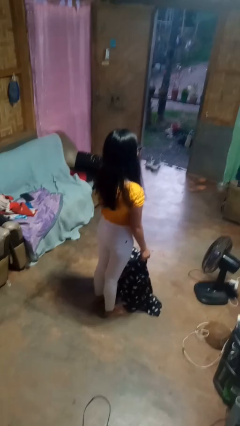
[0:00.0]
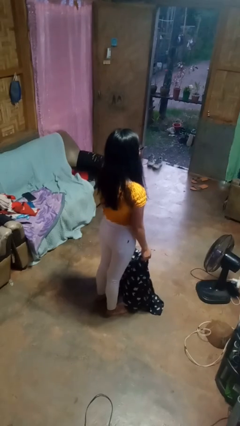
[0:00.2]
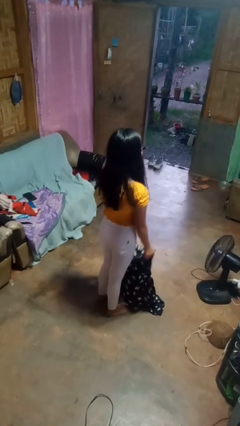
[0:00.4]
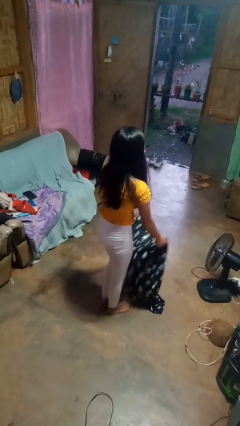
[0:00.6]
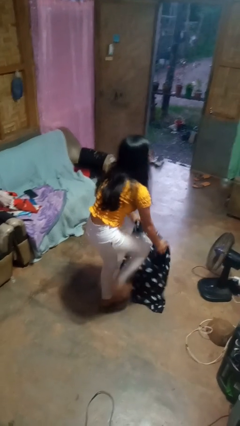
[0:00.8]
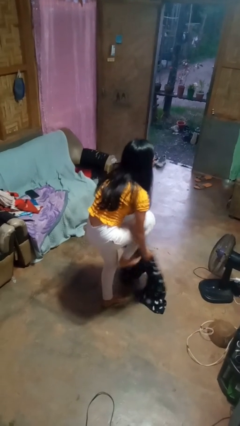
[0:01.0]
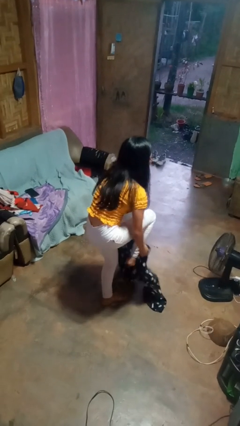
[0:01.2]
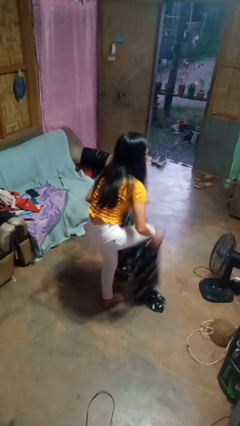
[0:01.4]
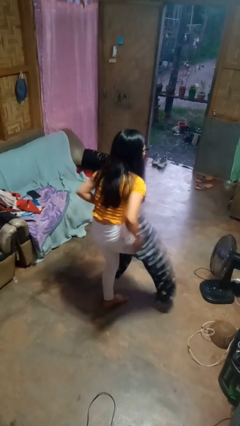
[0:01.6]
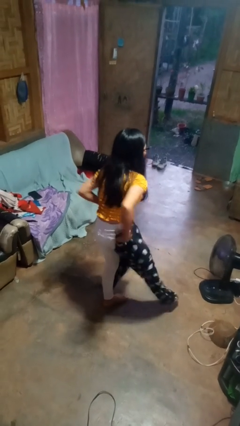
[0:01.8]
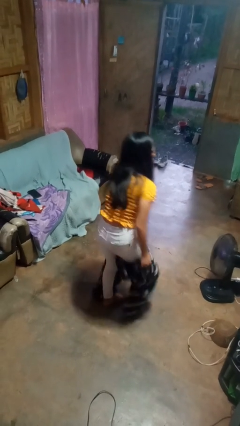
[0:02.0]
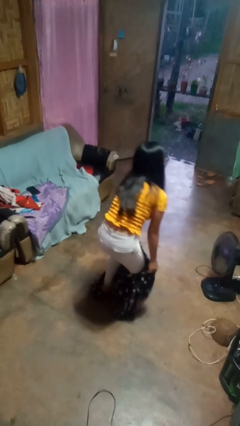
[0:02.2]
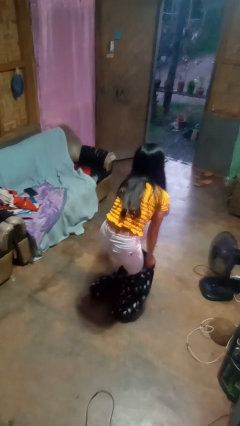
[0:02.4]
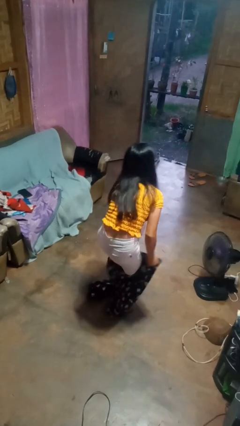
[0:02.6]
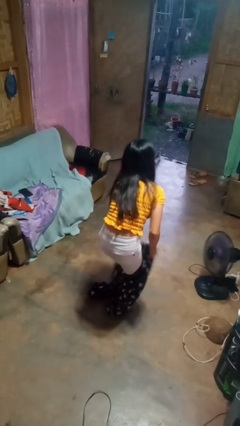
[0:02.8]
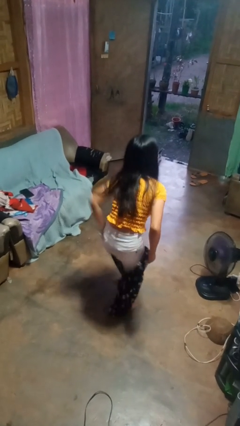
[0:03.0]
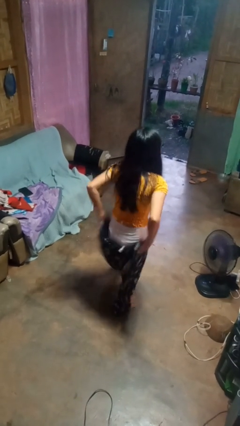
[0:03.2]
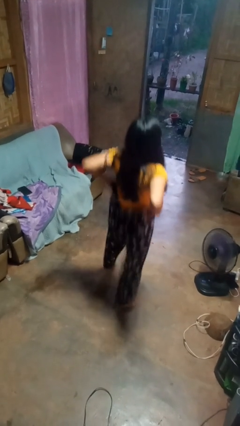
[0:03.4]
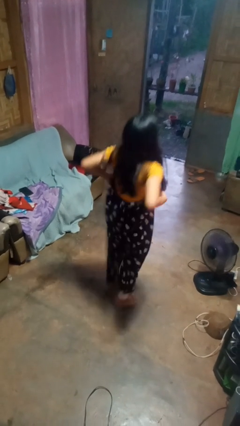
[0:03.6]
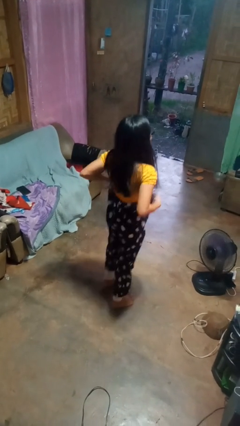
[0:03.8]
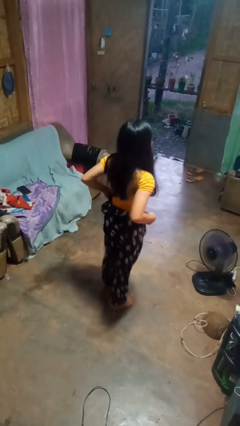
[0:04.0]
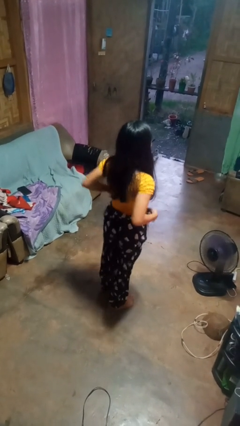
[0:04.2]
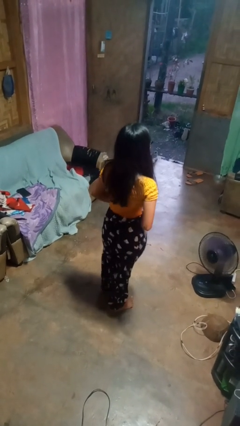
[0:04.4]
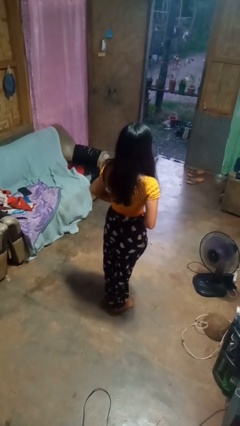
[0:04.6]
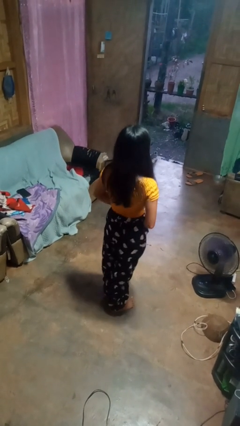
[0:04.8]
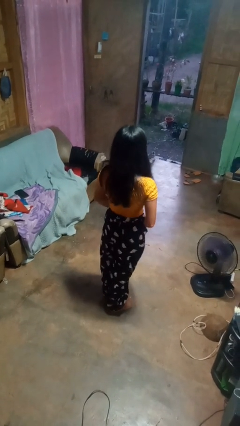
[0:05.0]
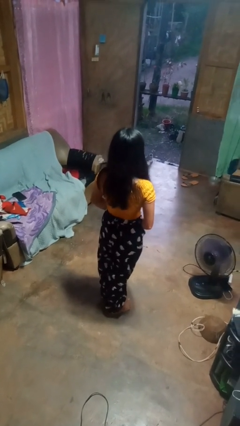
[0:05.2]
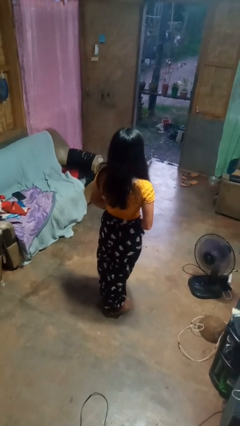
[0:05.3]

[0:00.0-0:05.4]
person puts on pants

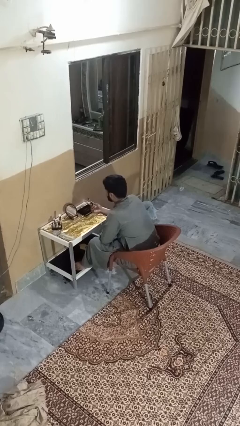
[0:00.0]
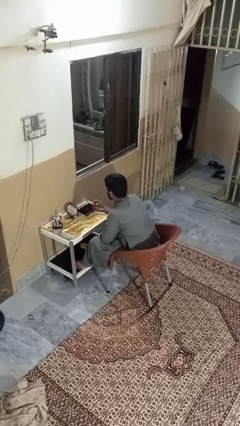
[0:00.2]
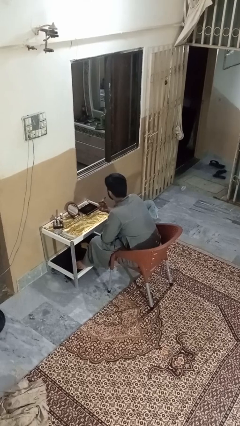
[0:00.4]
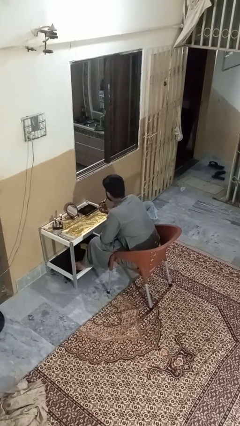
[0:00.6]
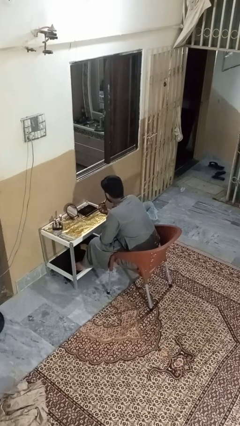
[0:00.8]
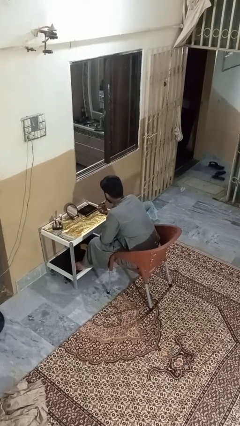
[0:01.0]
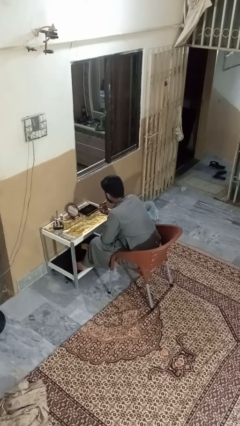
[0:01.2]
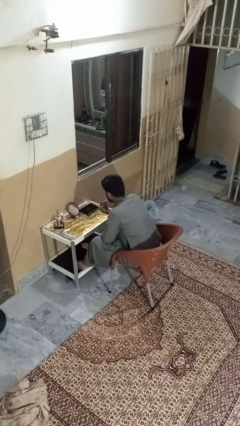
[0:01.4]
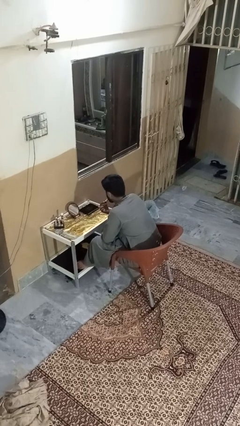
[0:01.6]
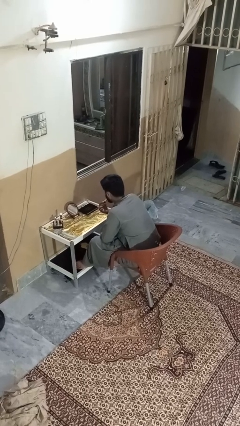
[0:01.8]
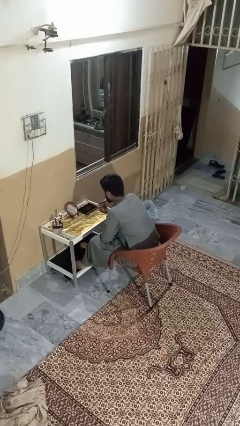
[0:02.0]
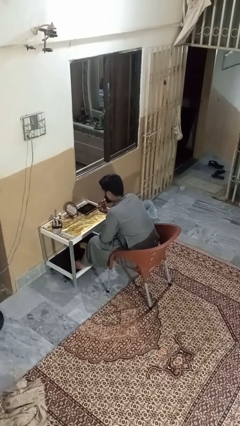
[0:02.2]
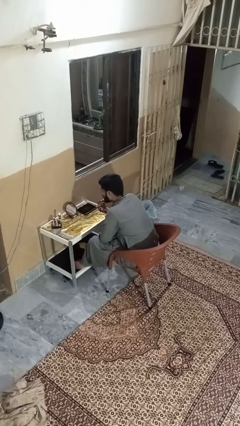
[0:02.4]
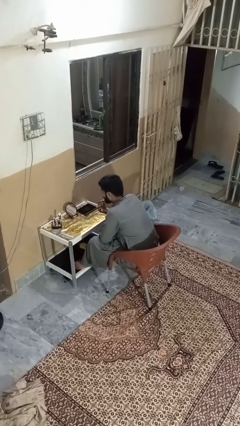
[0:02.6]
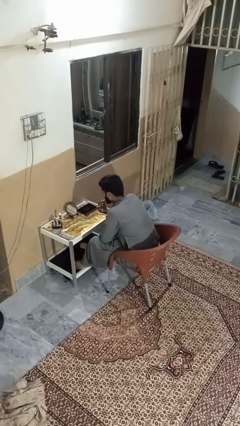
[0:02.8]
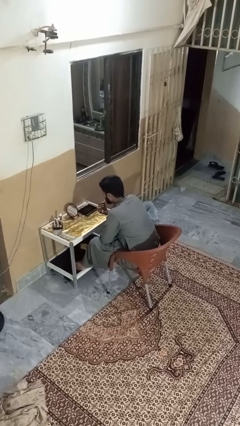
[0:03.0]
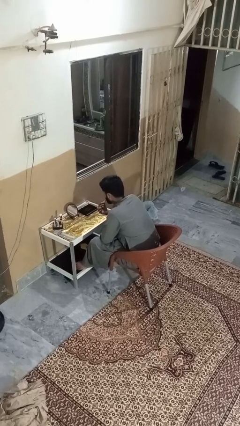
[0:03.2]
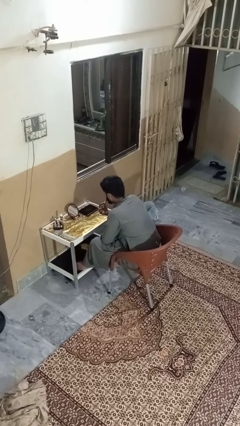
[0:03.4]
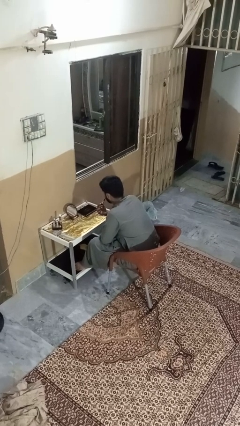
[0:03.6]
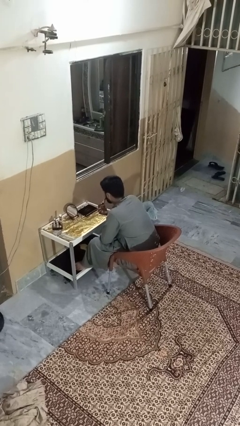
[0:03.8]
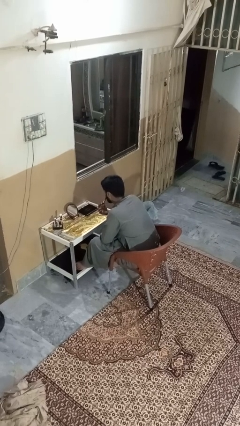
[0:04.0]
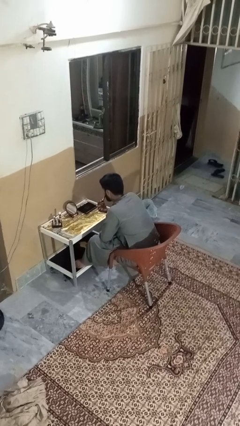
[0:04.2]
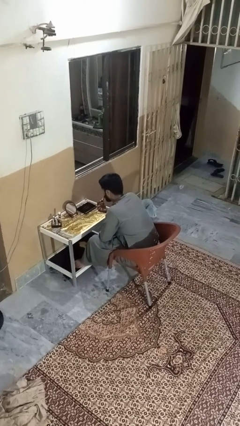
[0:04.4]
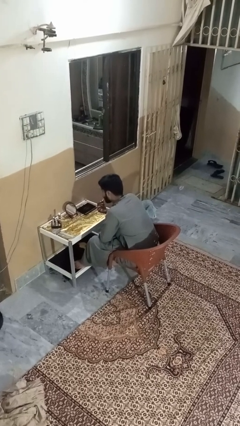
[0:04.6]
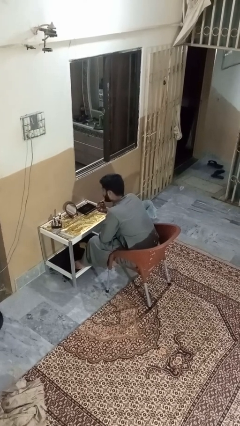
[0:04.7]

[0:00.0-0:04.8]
person applies lip makeup

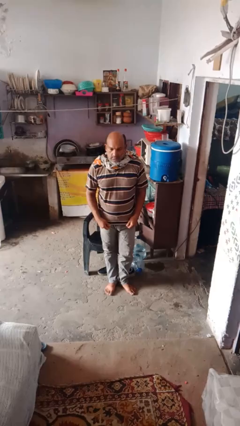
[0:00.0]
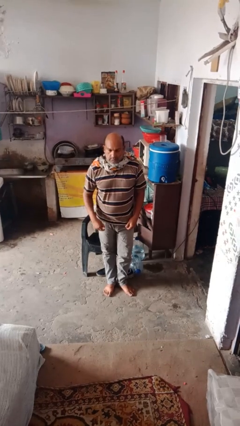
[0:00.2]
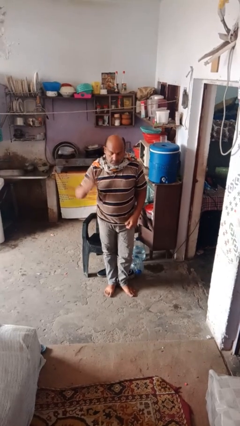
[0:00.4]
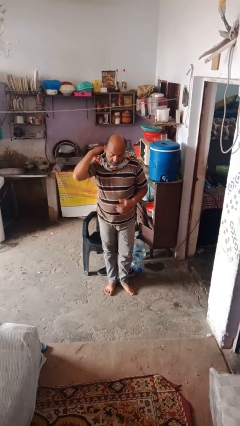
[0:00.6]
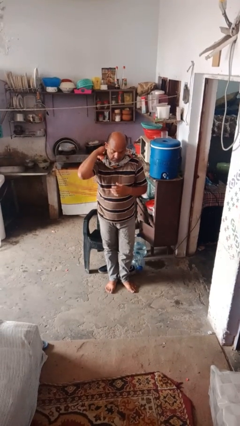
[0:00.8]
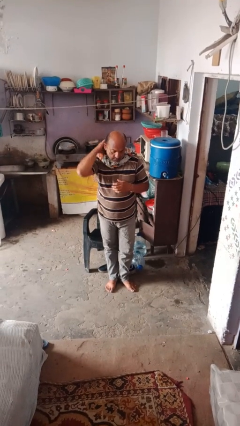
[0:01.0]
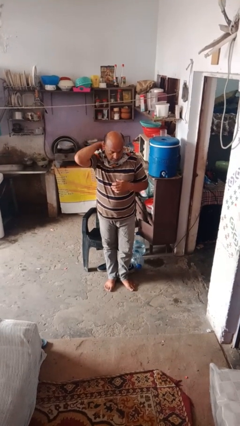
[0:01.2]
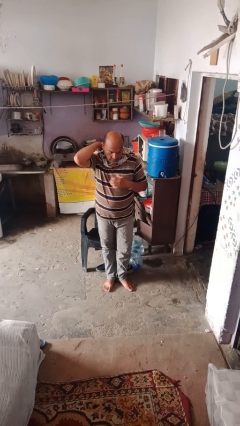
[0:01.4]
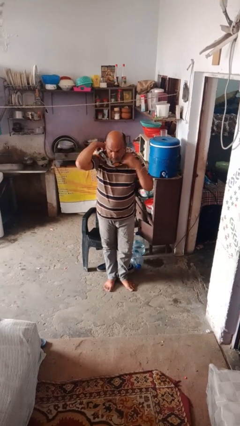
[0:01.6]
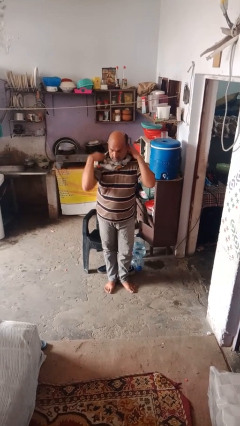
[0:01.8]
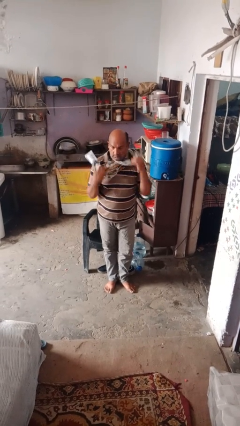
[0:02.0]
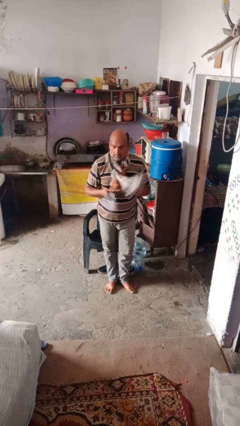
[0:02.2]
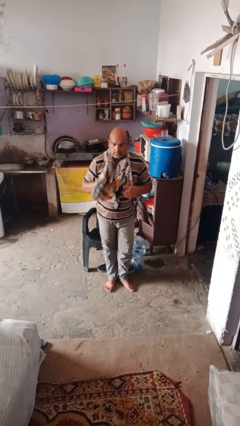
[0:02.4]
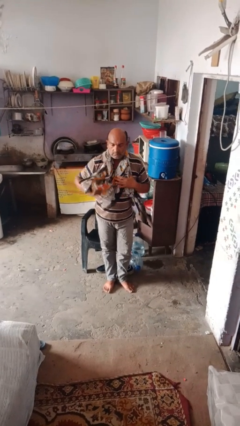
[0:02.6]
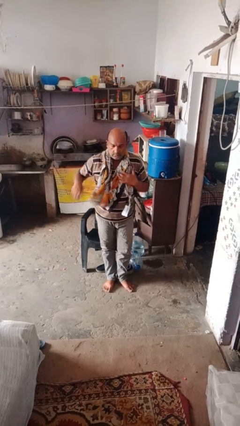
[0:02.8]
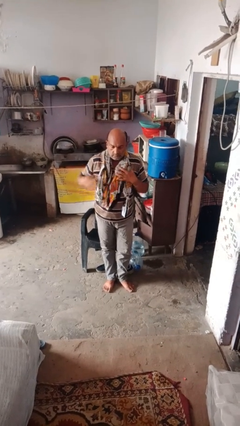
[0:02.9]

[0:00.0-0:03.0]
person takes off scarf

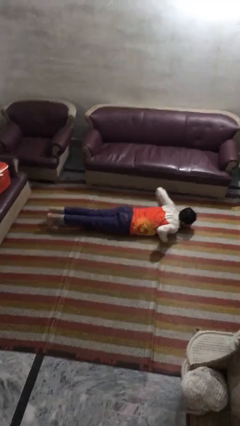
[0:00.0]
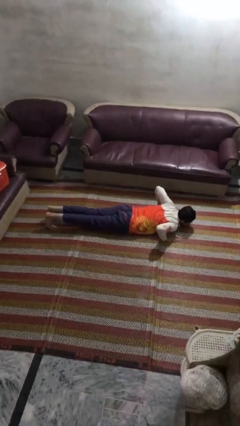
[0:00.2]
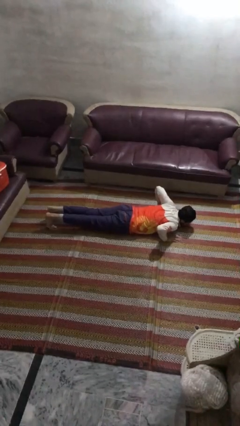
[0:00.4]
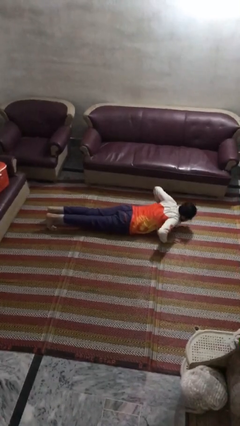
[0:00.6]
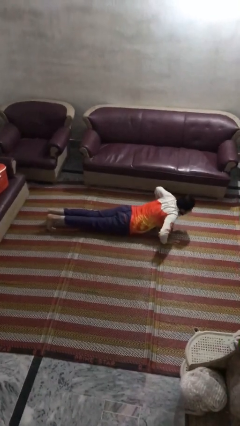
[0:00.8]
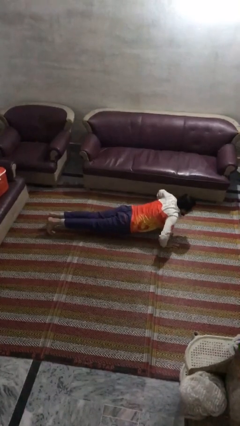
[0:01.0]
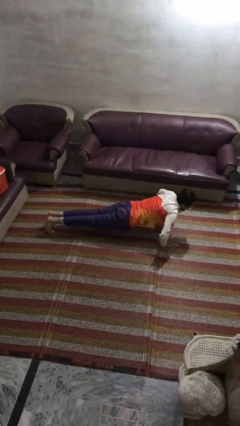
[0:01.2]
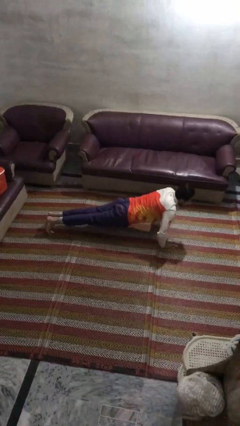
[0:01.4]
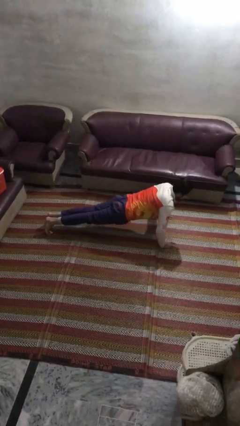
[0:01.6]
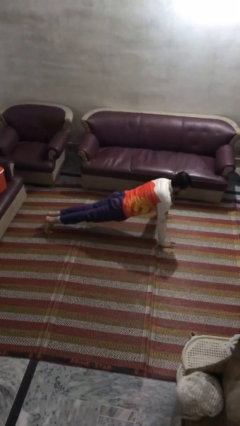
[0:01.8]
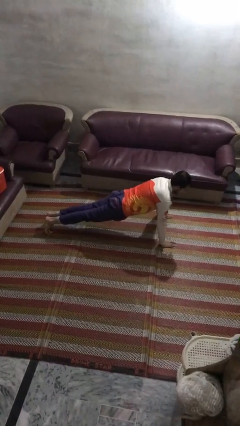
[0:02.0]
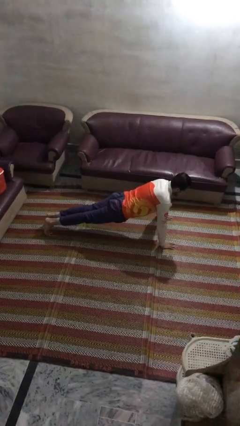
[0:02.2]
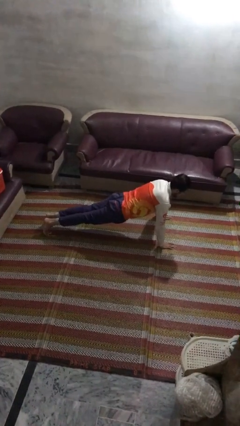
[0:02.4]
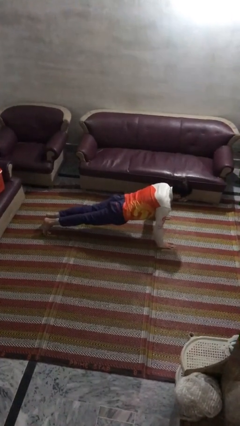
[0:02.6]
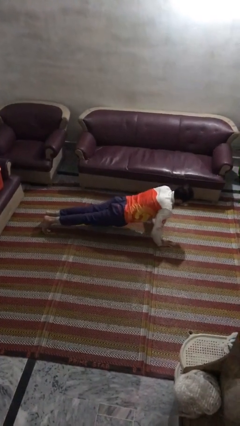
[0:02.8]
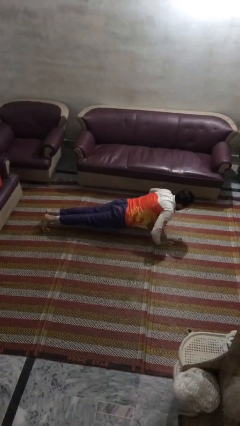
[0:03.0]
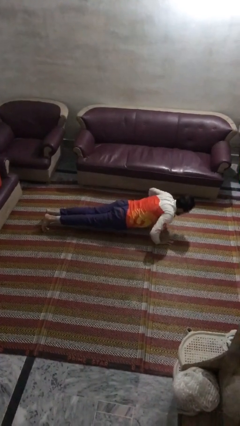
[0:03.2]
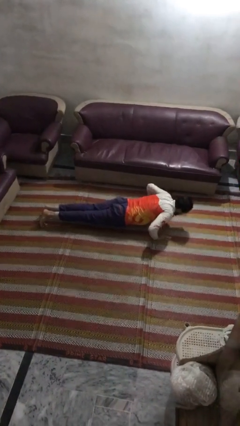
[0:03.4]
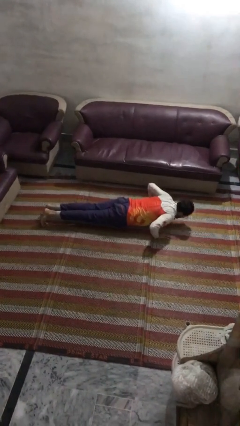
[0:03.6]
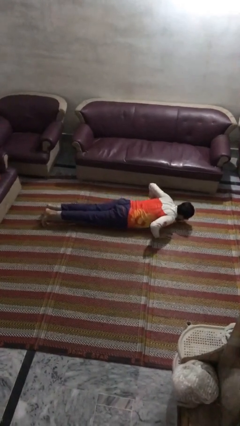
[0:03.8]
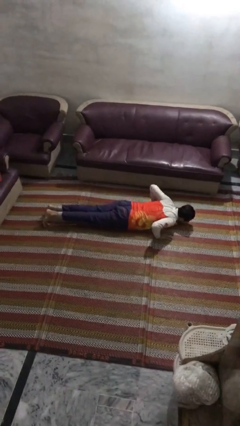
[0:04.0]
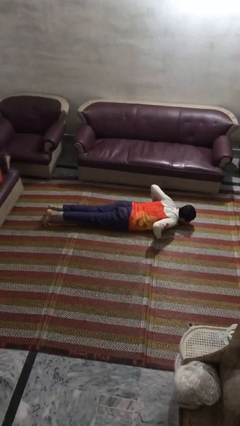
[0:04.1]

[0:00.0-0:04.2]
person exercises with pushup
